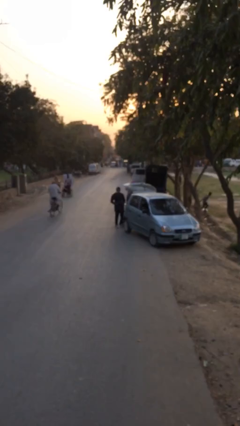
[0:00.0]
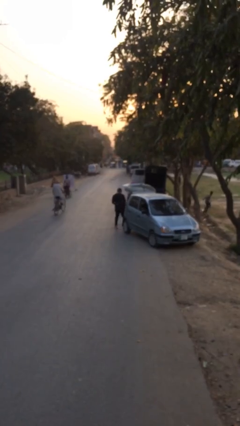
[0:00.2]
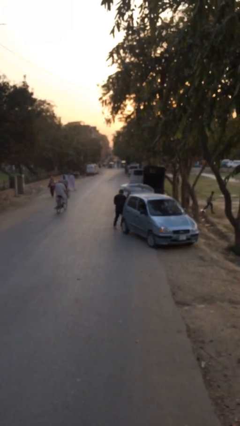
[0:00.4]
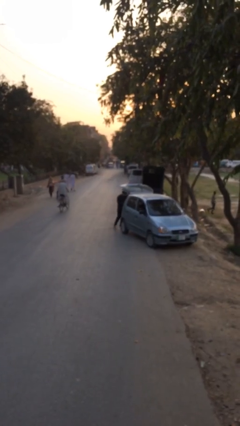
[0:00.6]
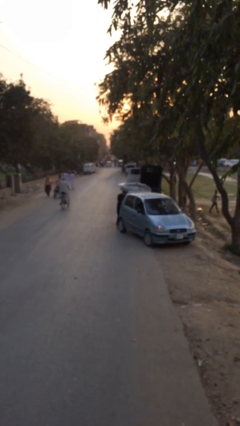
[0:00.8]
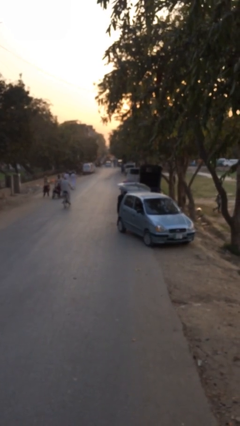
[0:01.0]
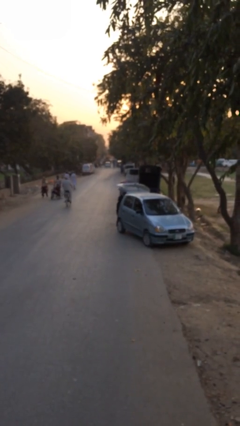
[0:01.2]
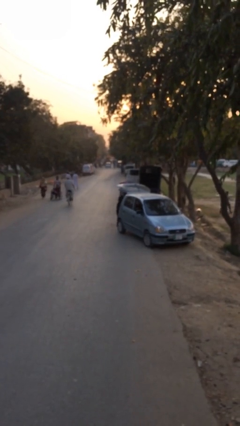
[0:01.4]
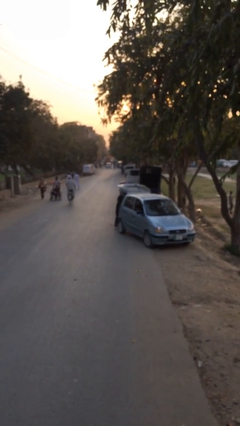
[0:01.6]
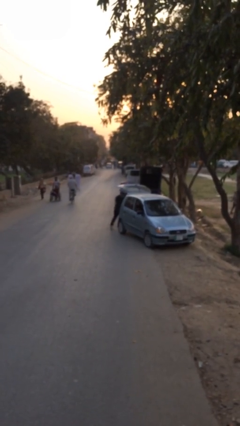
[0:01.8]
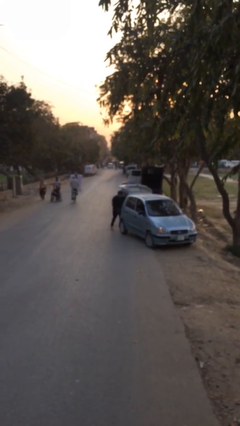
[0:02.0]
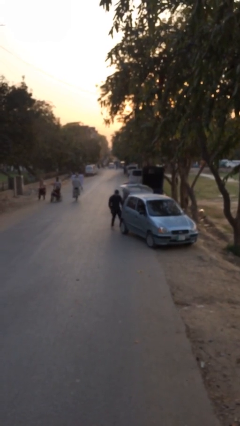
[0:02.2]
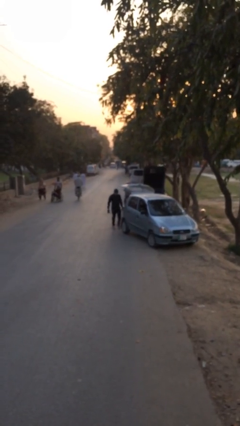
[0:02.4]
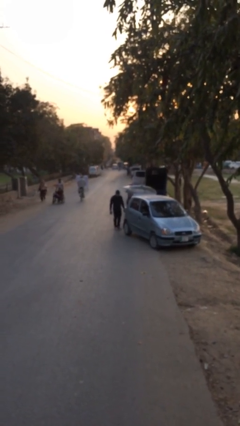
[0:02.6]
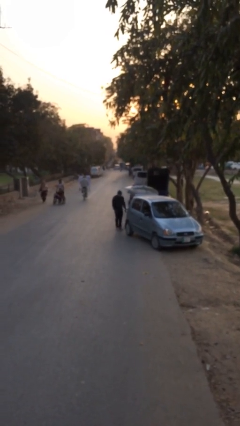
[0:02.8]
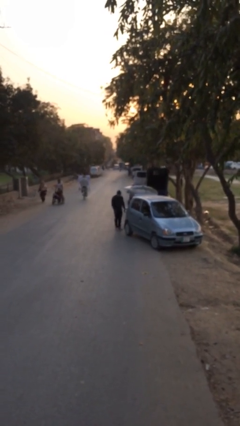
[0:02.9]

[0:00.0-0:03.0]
person loads car

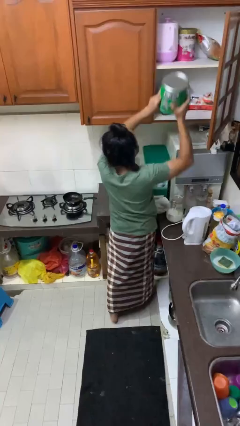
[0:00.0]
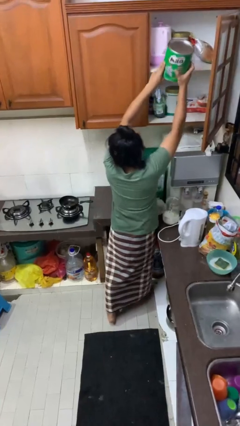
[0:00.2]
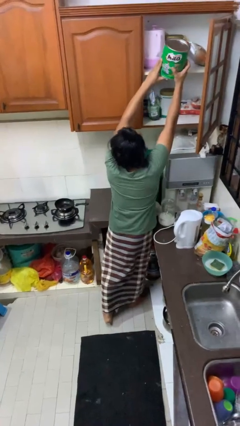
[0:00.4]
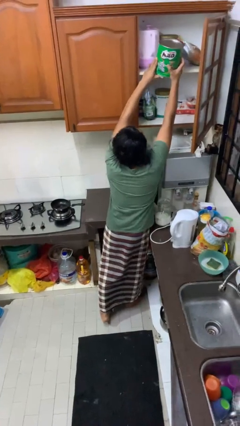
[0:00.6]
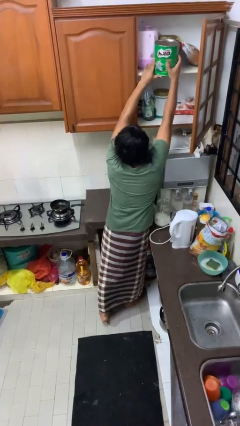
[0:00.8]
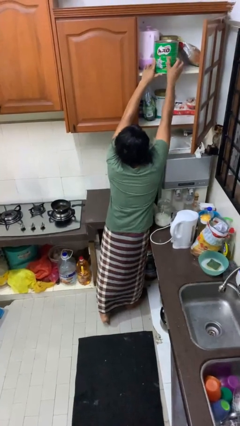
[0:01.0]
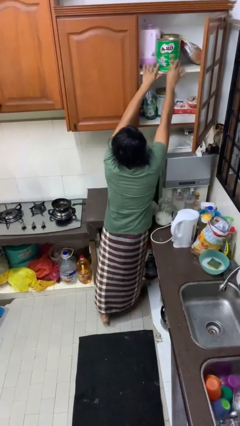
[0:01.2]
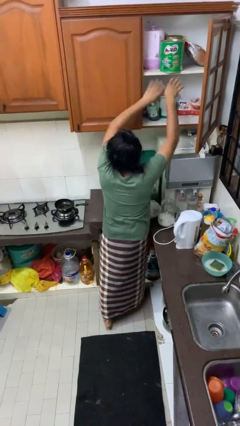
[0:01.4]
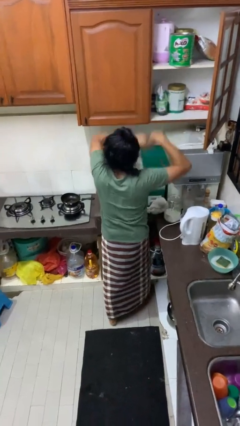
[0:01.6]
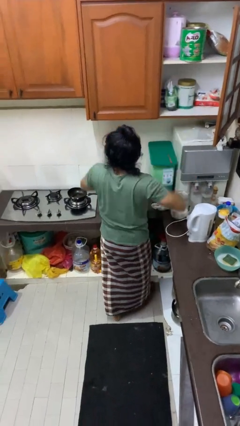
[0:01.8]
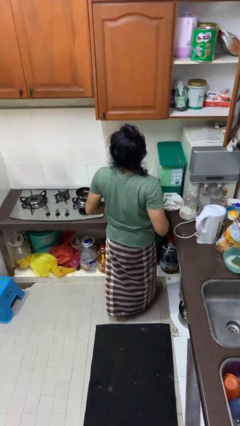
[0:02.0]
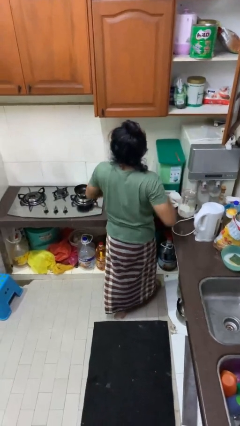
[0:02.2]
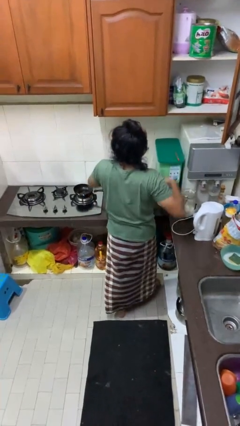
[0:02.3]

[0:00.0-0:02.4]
person puts object in cabinet

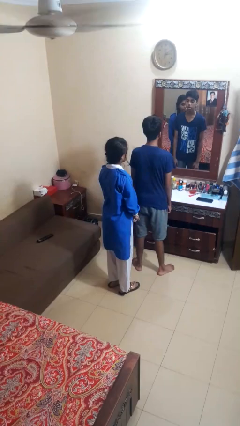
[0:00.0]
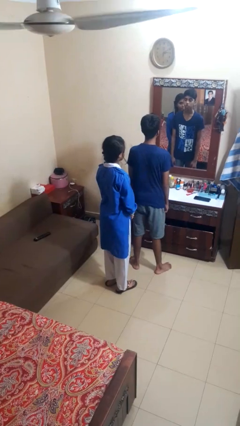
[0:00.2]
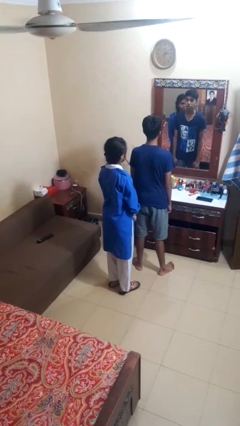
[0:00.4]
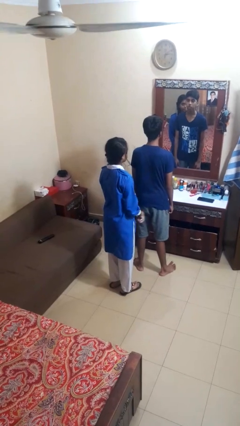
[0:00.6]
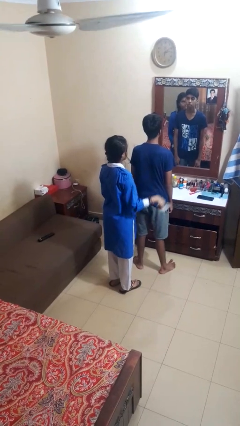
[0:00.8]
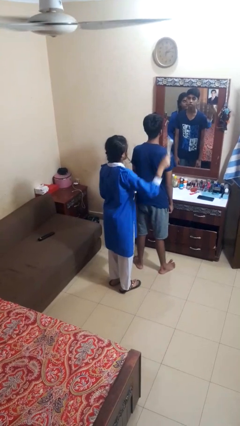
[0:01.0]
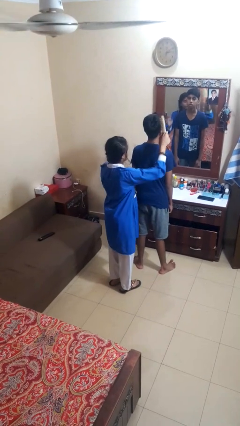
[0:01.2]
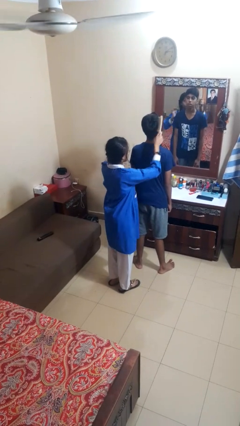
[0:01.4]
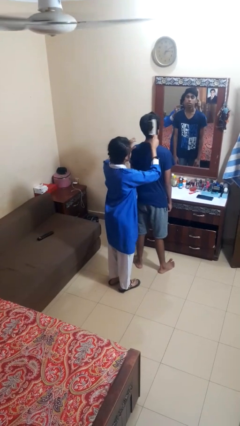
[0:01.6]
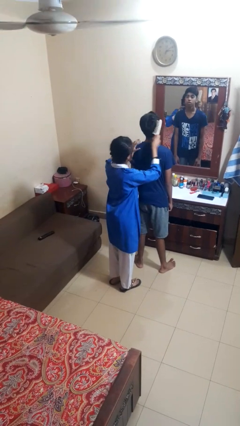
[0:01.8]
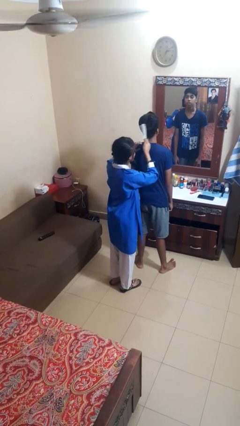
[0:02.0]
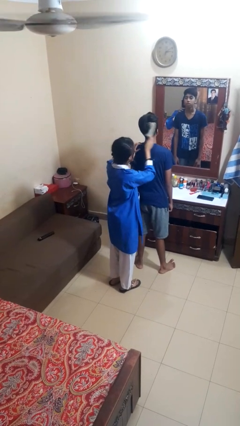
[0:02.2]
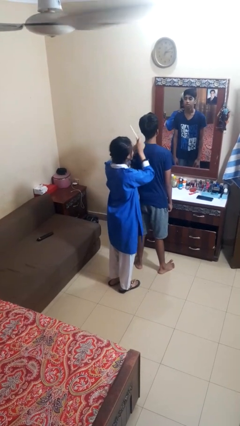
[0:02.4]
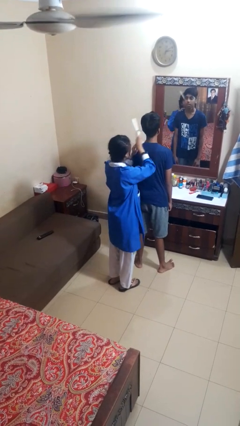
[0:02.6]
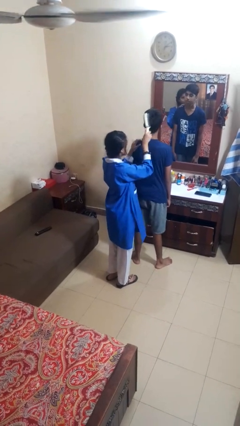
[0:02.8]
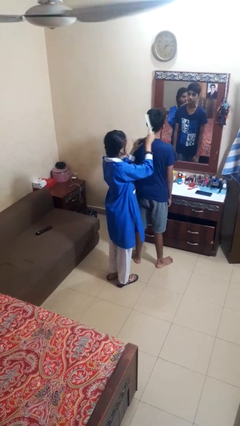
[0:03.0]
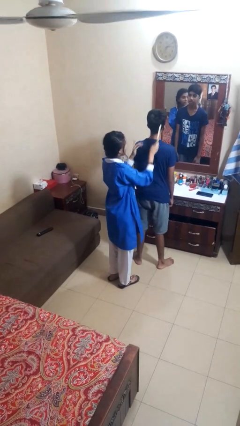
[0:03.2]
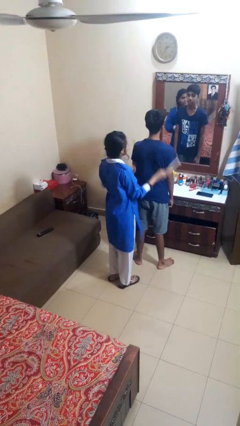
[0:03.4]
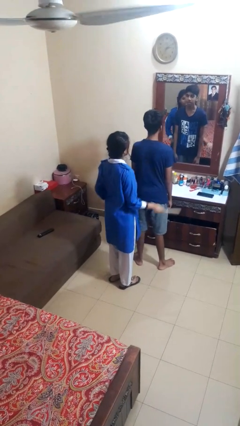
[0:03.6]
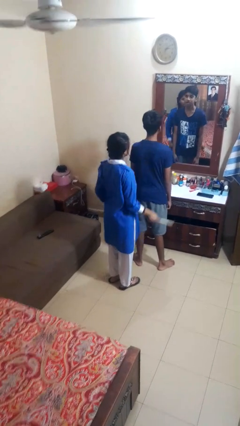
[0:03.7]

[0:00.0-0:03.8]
person brushes hair of person

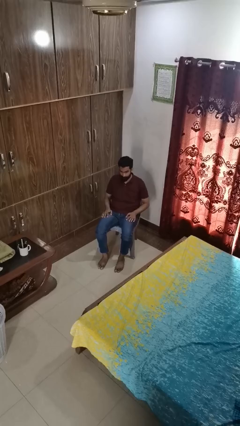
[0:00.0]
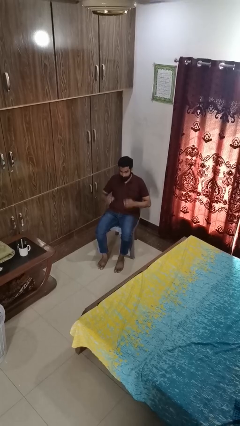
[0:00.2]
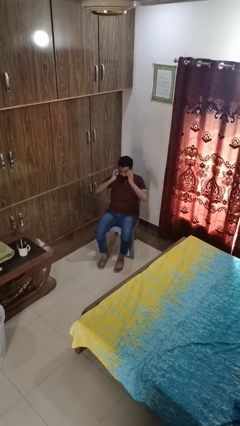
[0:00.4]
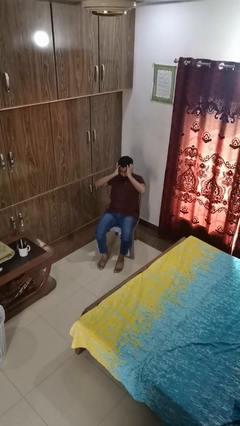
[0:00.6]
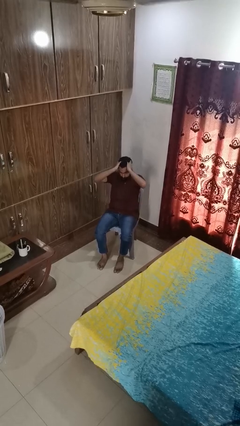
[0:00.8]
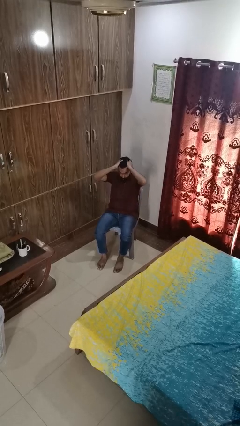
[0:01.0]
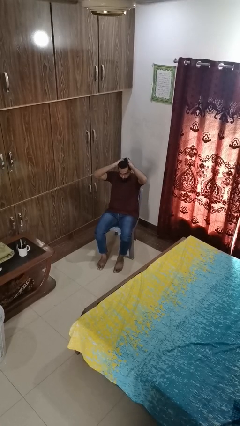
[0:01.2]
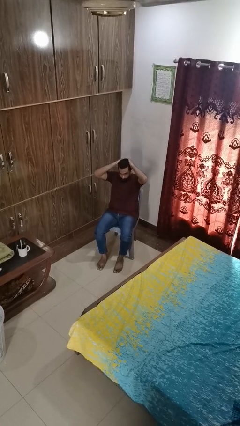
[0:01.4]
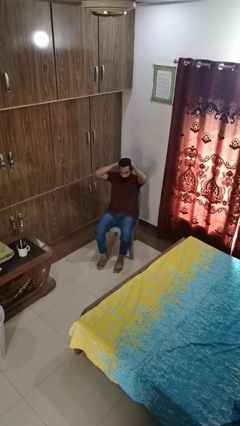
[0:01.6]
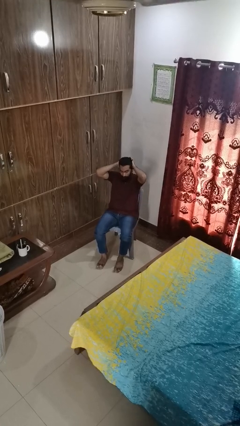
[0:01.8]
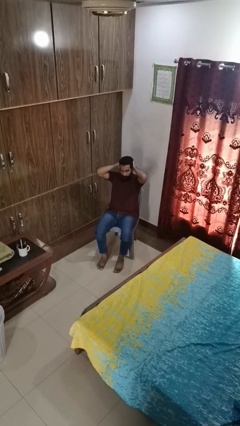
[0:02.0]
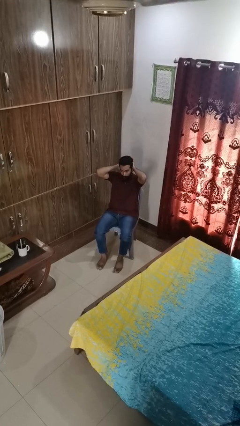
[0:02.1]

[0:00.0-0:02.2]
person strokes hair

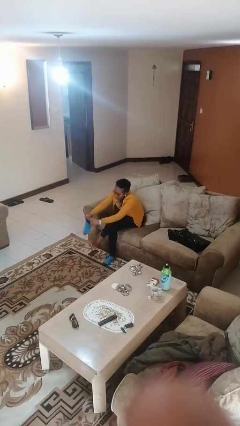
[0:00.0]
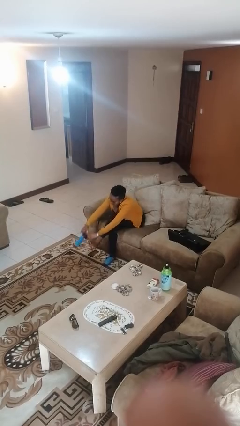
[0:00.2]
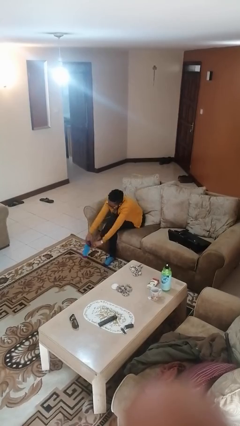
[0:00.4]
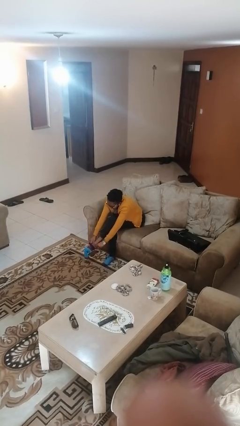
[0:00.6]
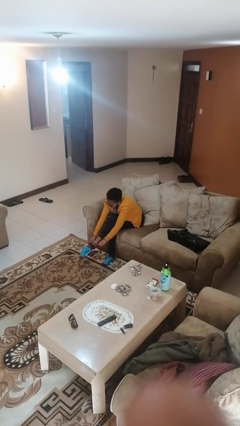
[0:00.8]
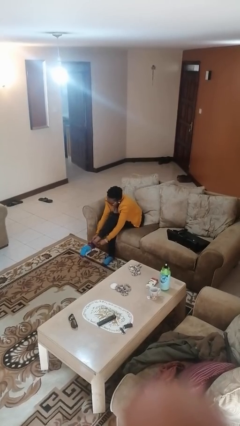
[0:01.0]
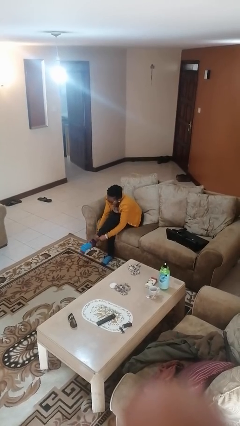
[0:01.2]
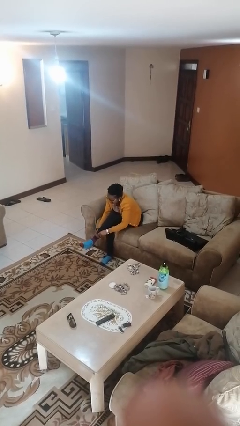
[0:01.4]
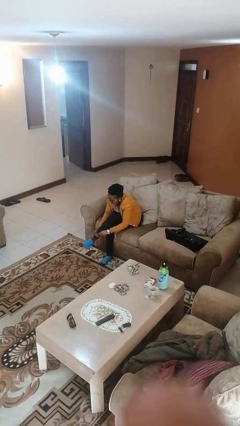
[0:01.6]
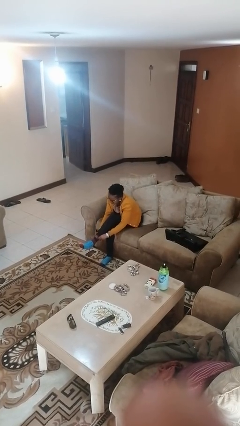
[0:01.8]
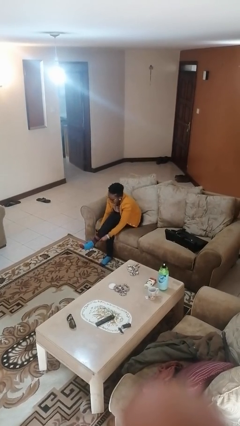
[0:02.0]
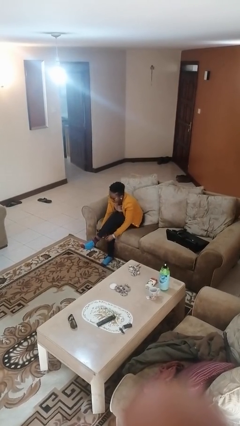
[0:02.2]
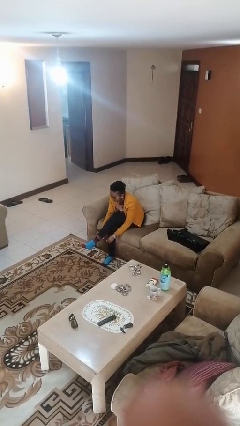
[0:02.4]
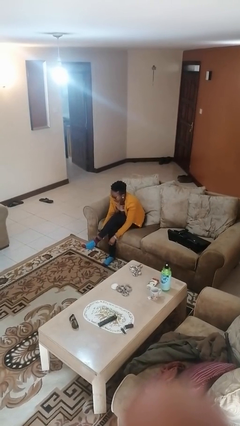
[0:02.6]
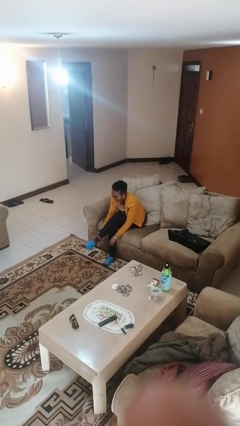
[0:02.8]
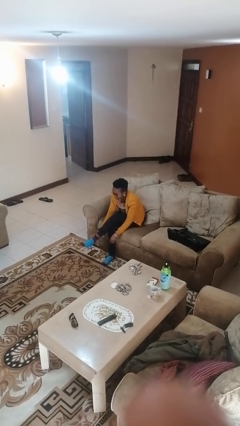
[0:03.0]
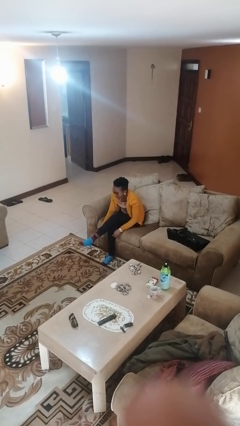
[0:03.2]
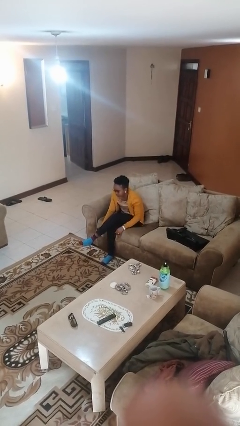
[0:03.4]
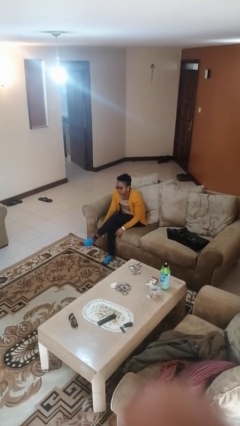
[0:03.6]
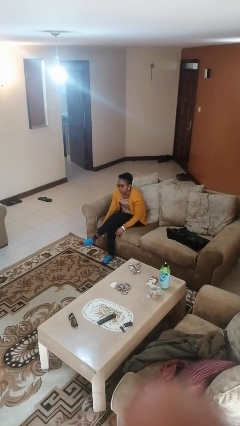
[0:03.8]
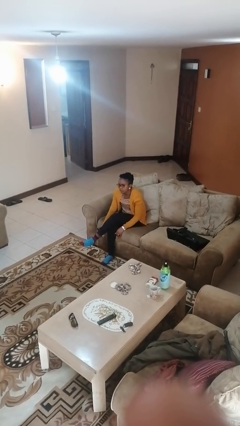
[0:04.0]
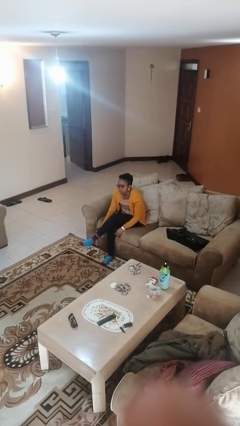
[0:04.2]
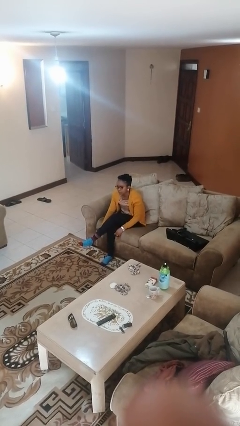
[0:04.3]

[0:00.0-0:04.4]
person puts on socks

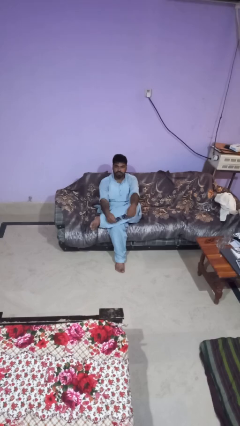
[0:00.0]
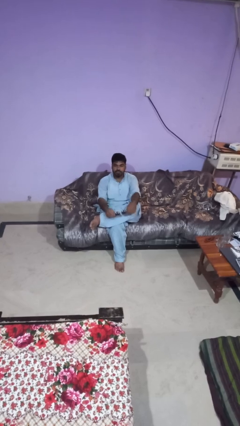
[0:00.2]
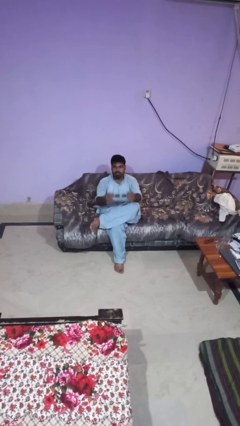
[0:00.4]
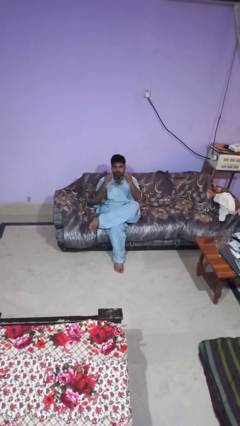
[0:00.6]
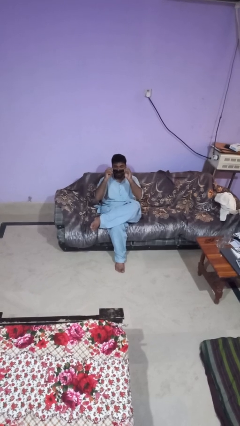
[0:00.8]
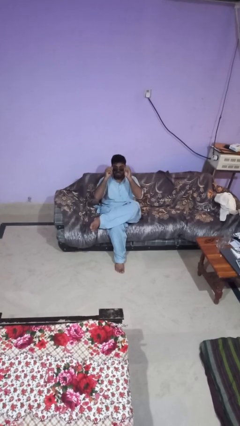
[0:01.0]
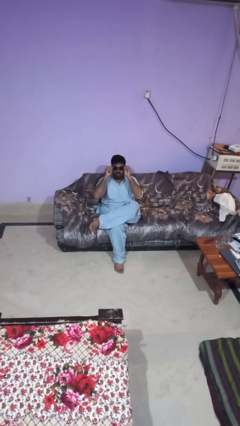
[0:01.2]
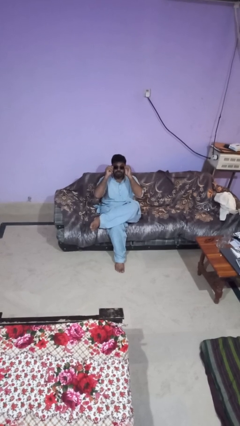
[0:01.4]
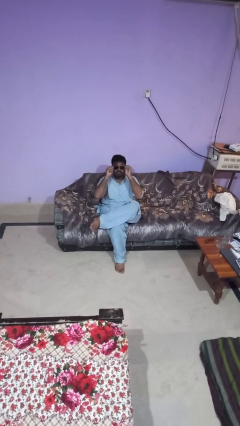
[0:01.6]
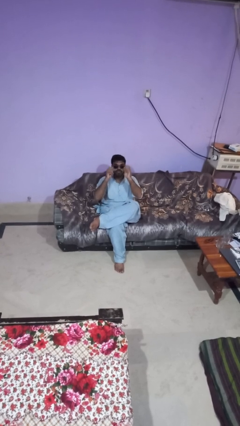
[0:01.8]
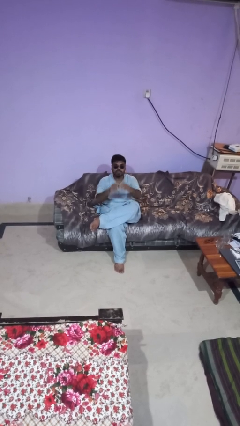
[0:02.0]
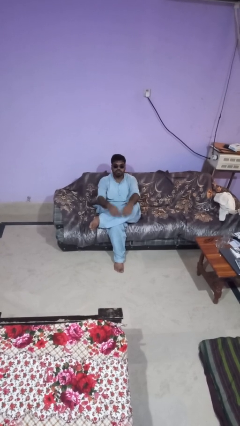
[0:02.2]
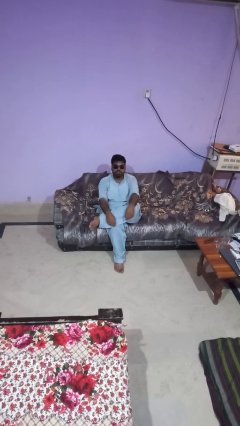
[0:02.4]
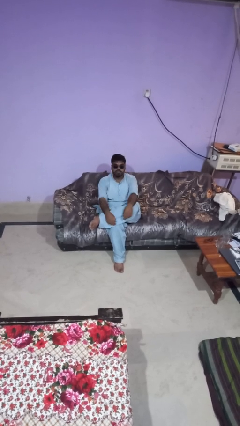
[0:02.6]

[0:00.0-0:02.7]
person puts on sunglasses
